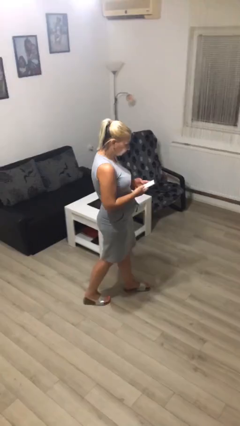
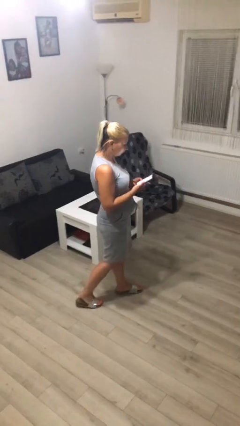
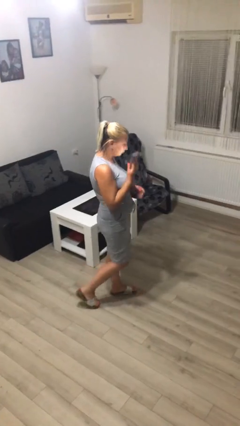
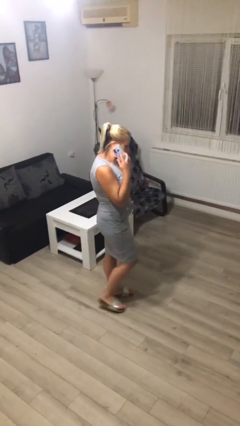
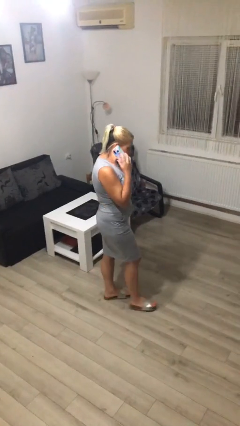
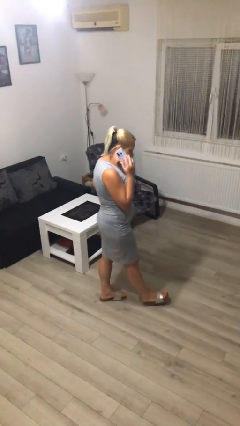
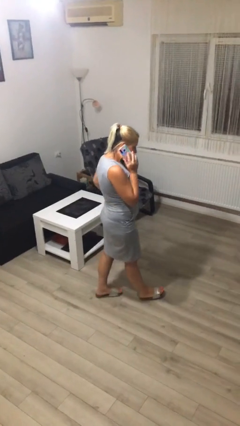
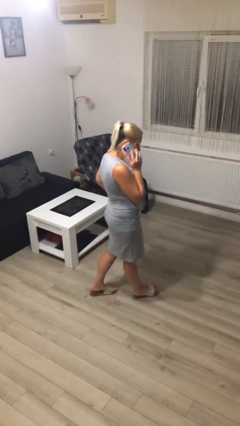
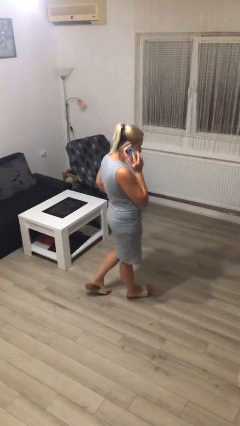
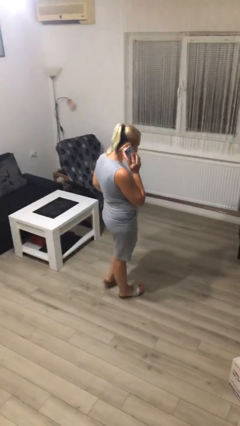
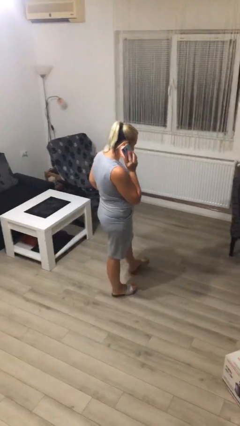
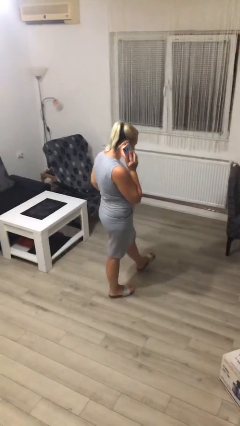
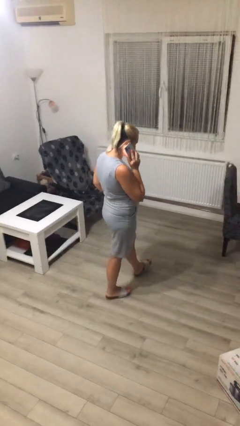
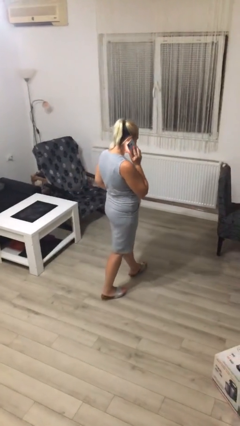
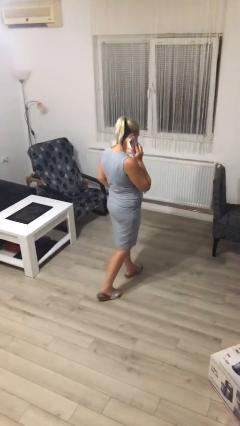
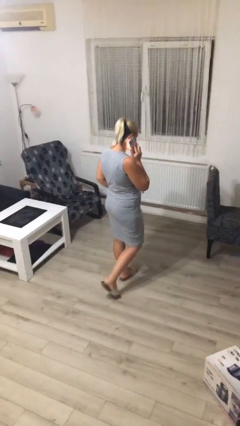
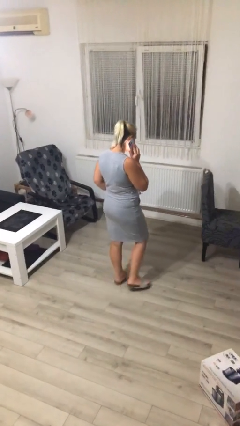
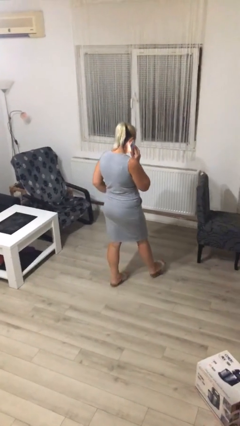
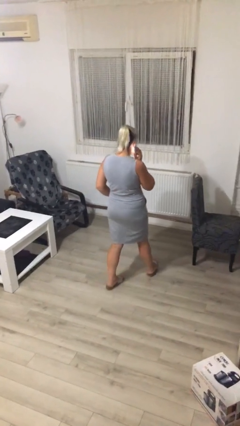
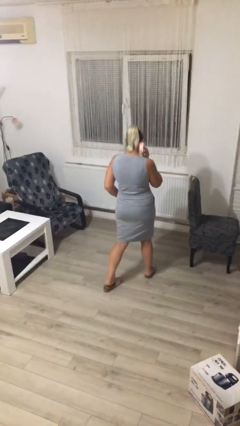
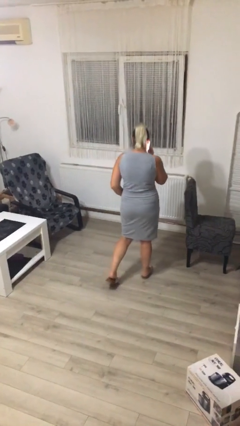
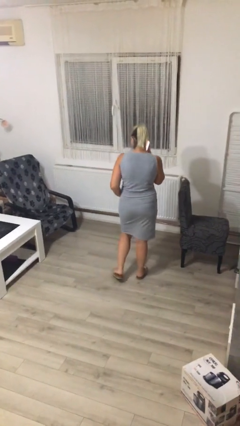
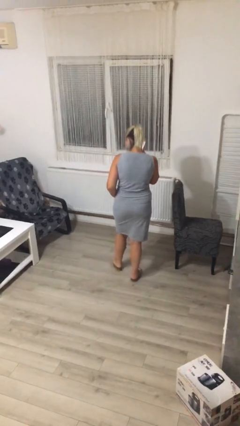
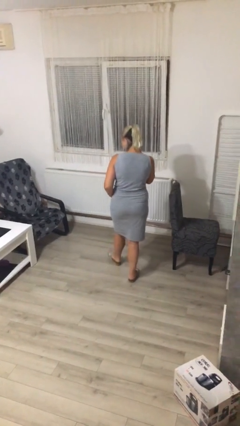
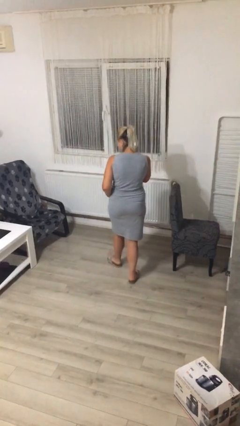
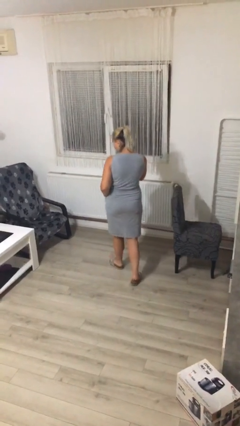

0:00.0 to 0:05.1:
person talks on phone

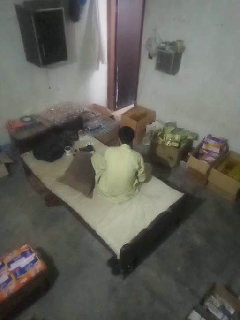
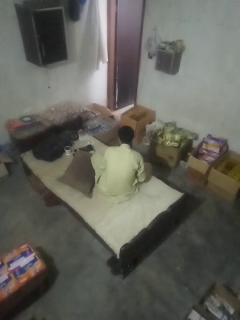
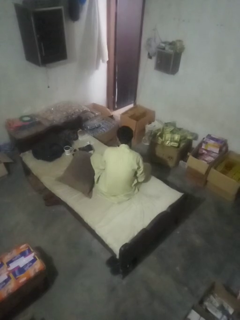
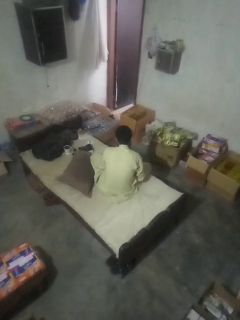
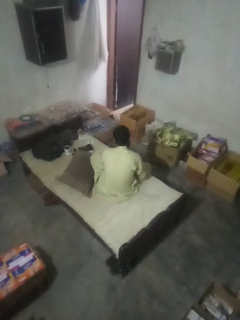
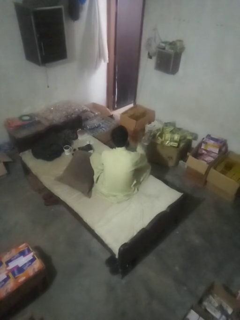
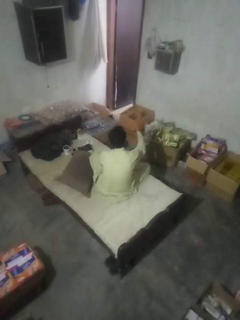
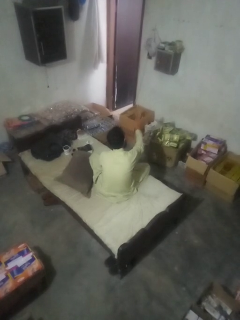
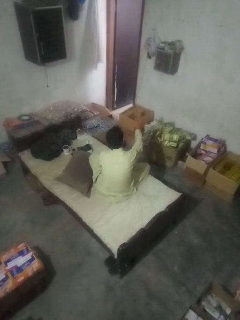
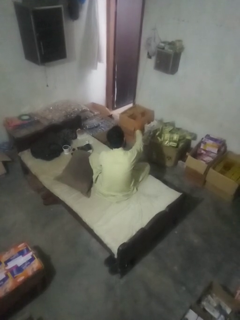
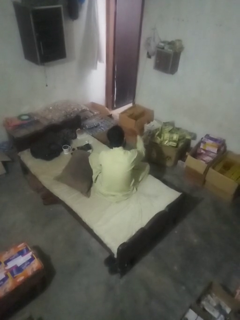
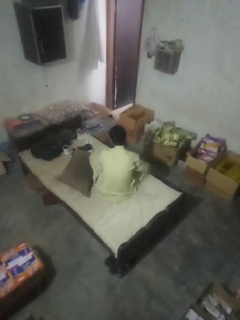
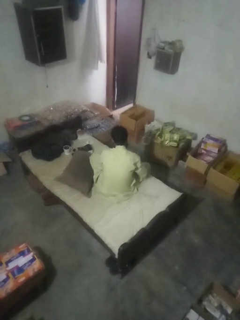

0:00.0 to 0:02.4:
person gestures stop

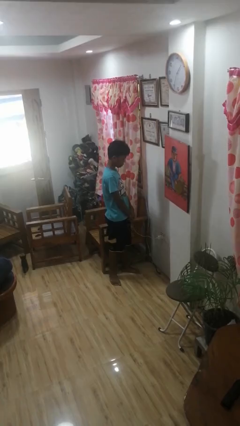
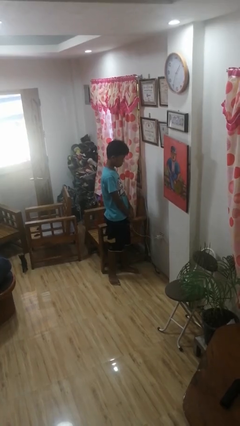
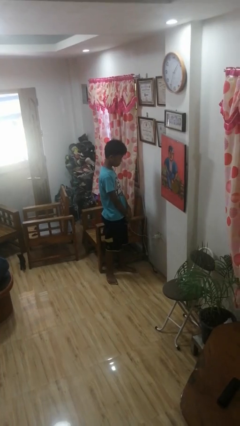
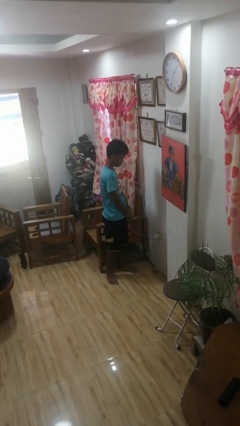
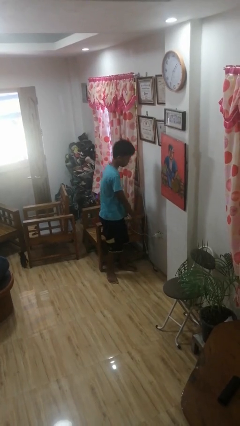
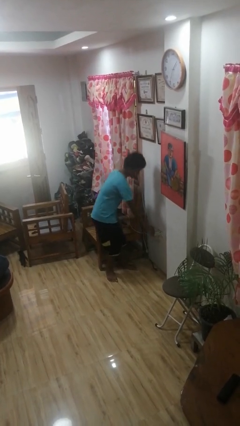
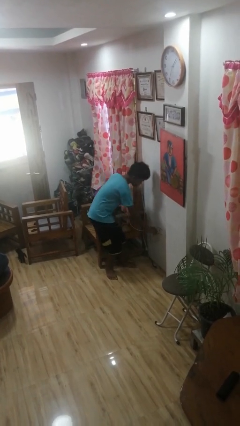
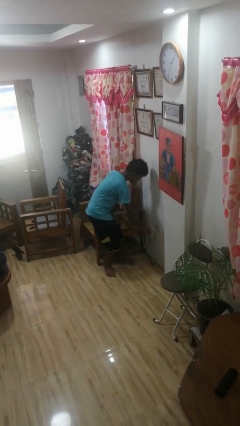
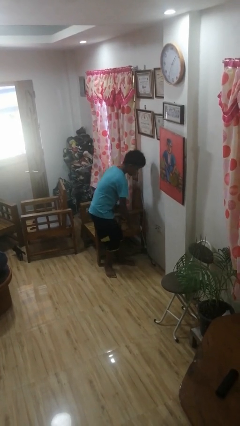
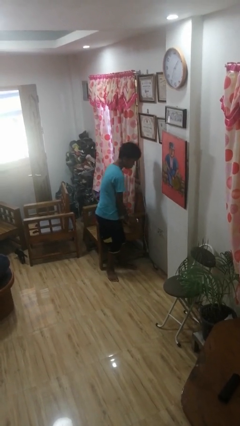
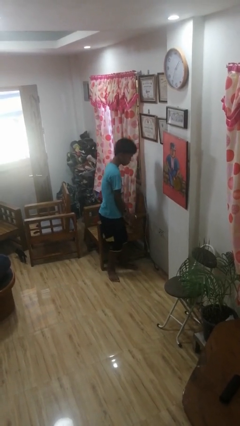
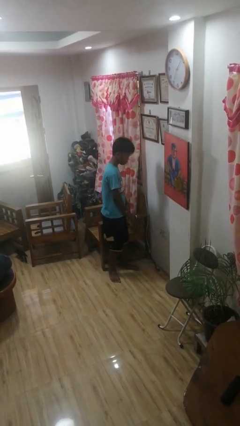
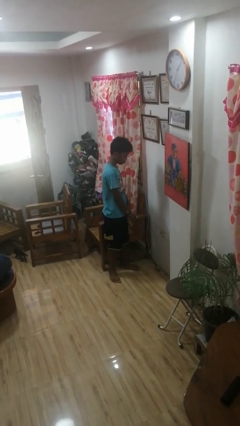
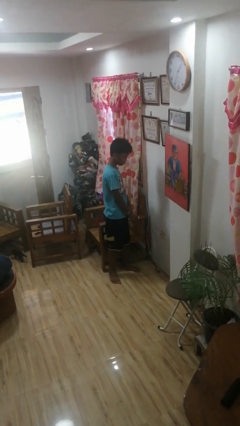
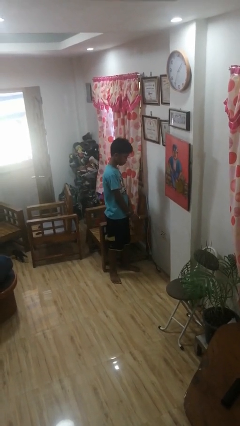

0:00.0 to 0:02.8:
person unplugs from electrical socket

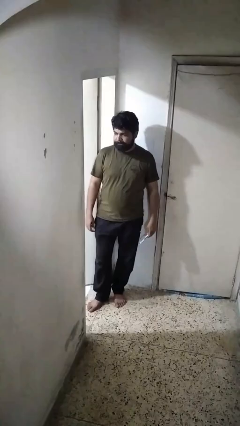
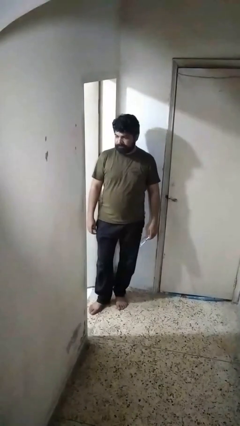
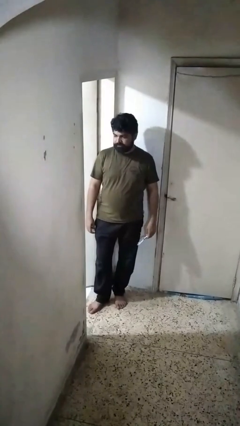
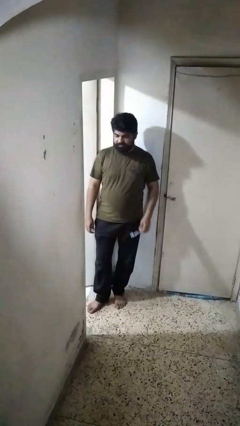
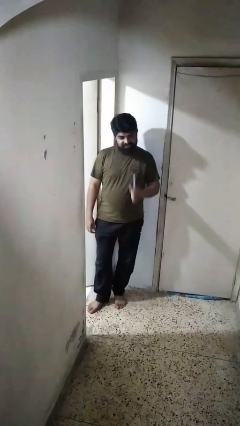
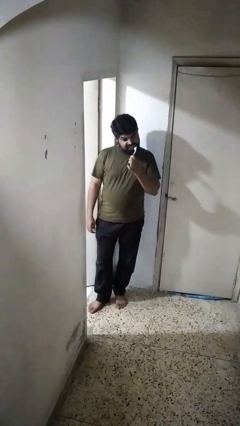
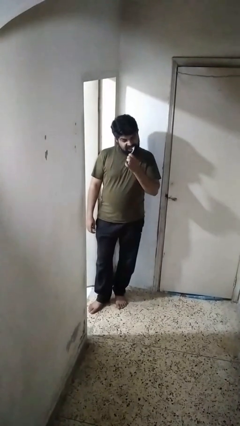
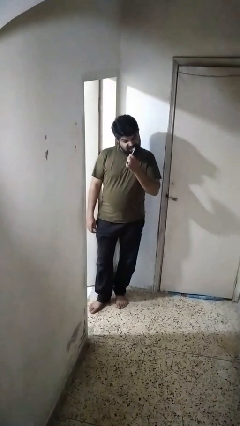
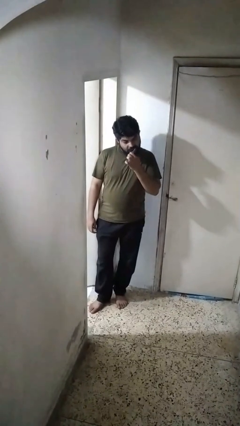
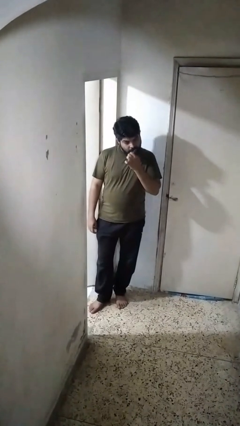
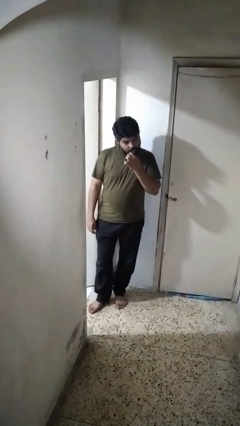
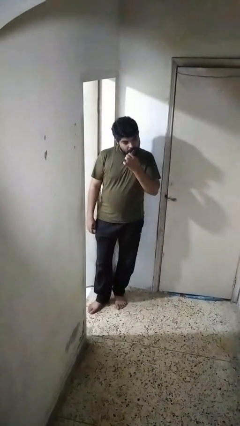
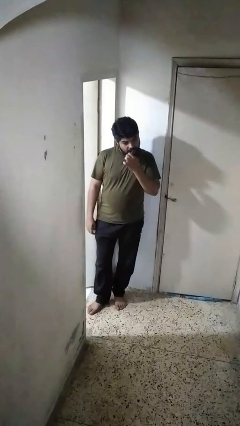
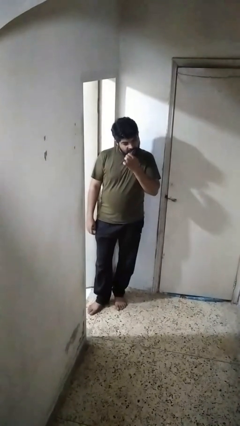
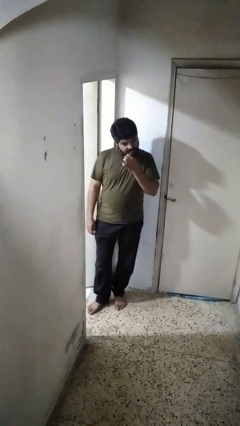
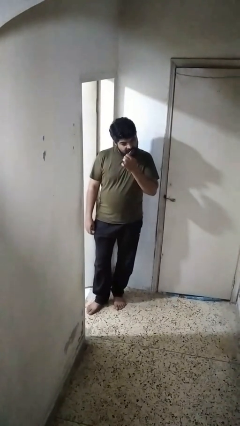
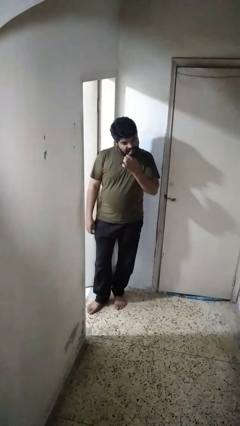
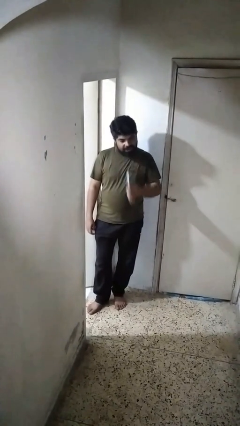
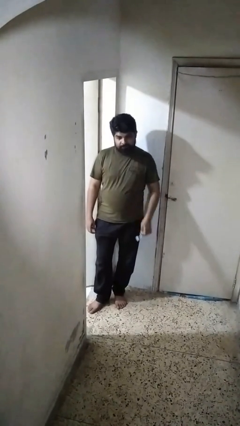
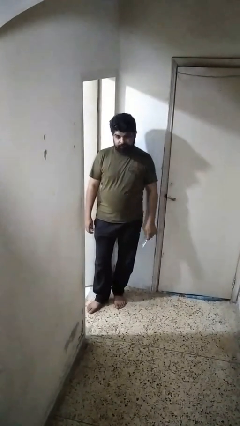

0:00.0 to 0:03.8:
person brushes teeth

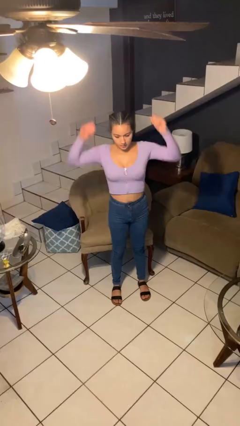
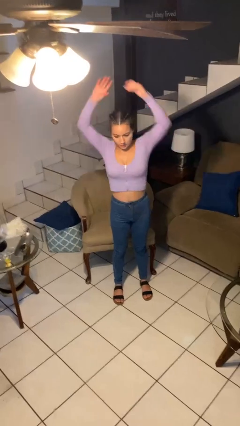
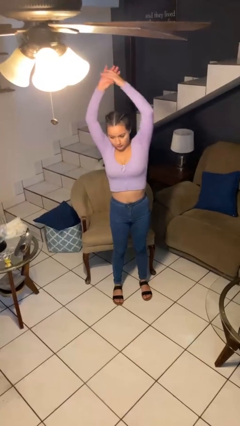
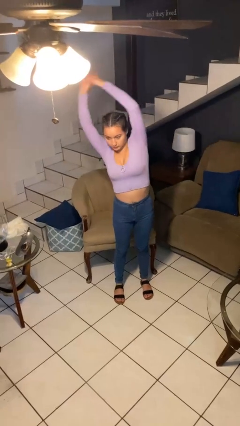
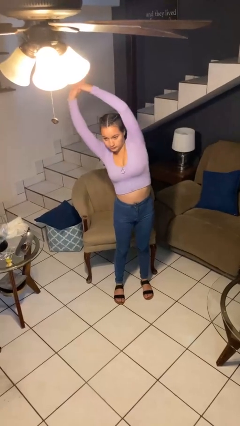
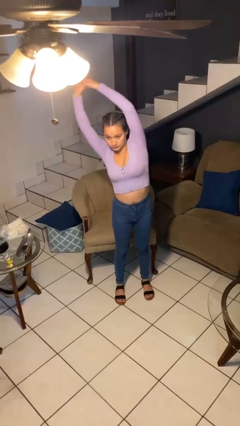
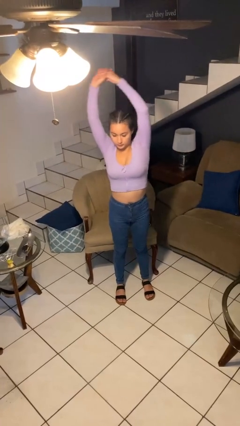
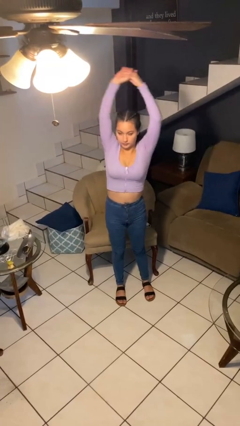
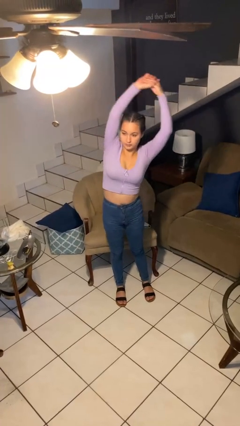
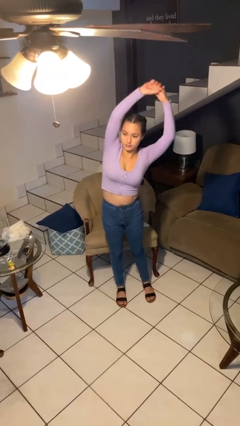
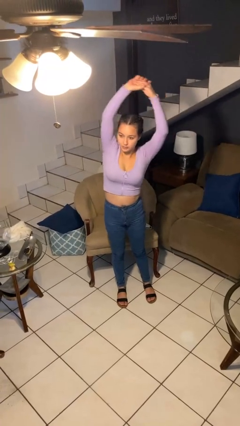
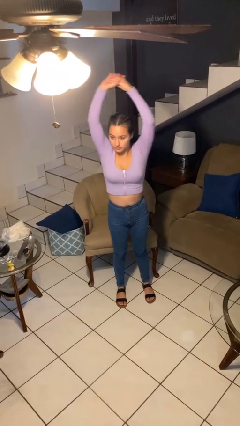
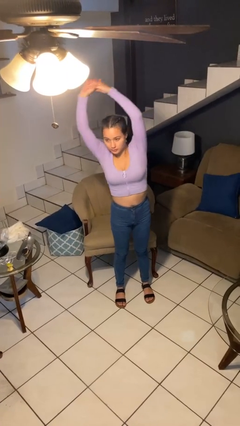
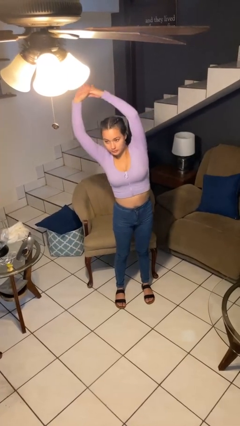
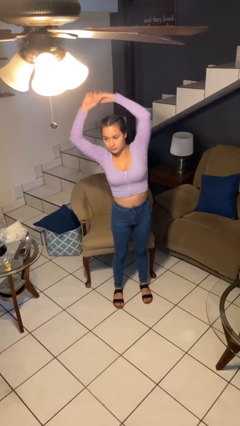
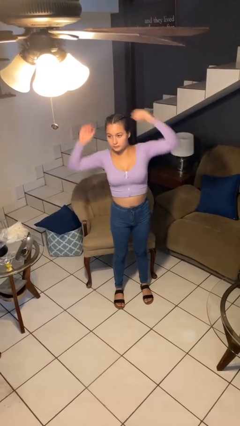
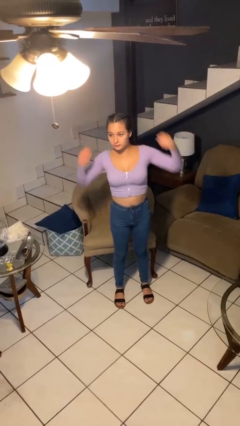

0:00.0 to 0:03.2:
person stretches arms over head

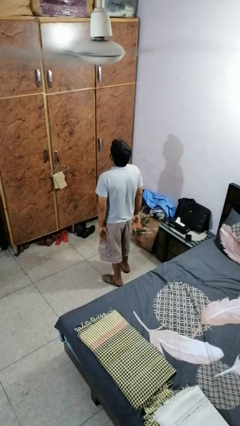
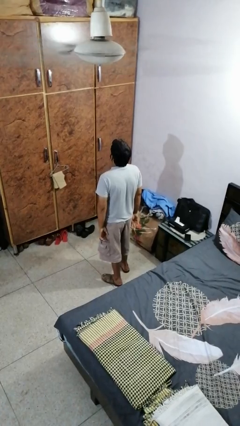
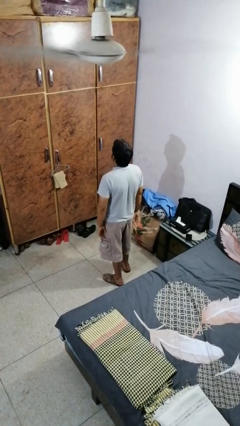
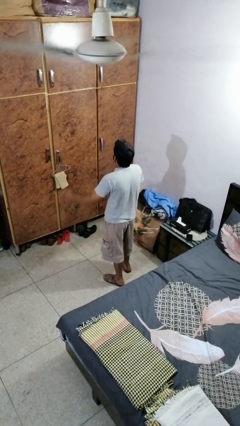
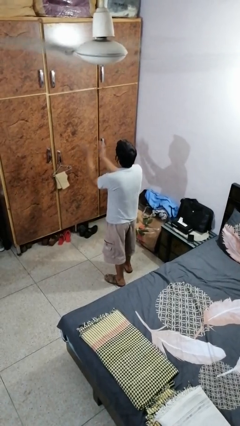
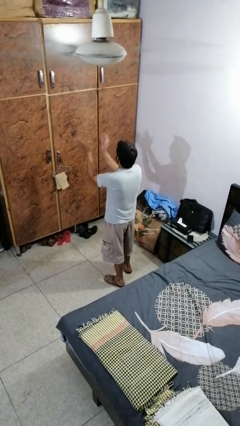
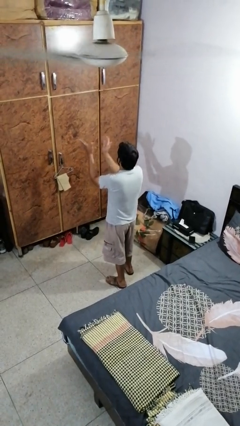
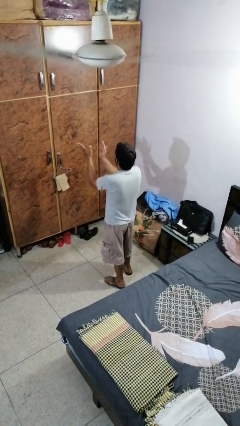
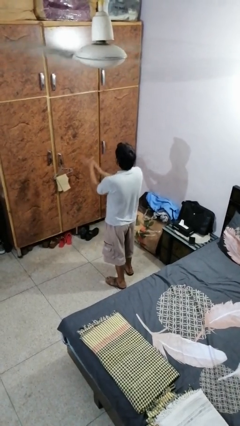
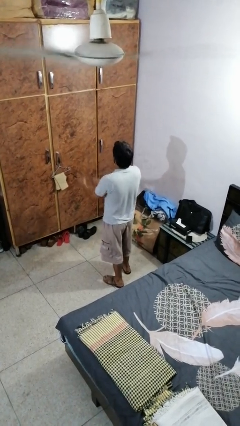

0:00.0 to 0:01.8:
person claps hands
